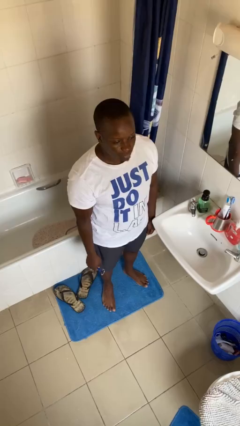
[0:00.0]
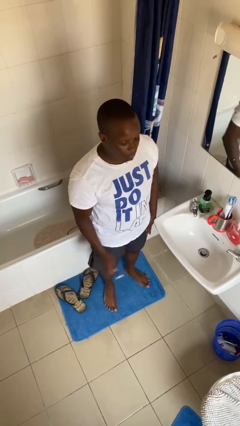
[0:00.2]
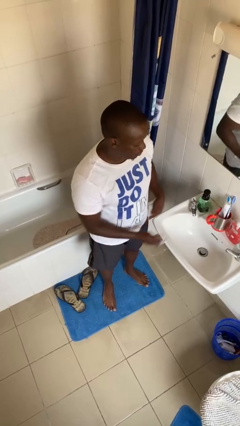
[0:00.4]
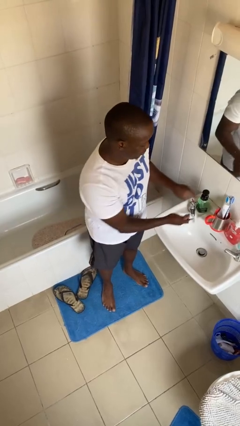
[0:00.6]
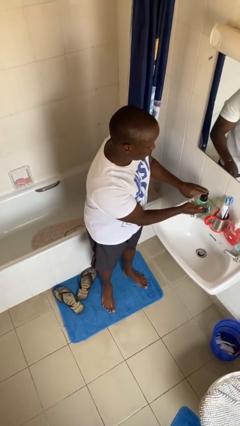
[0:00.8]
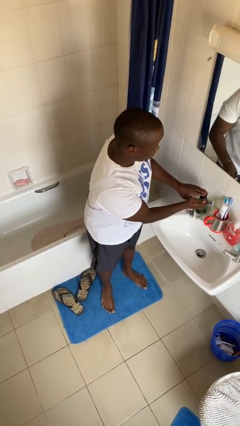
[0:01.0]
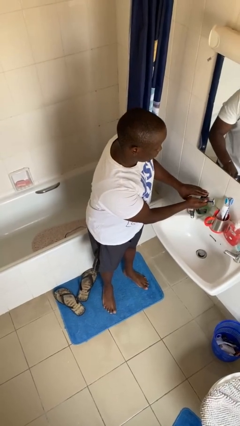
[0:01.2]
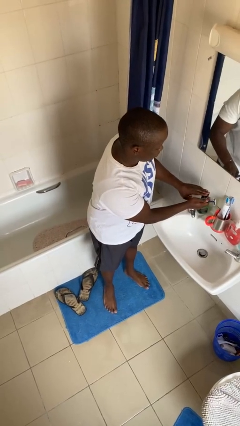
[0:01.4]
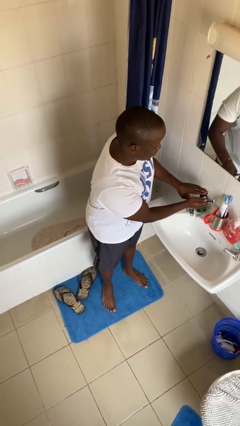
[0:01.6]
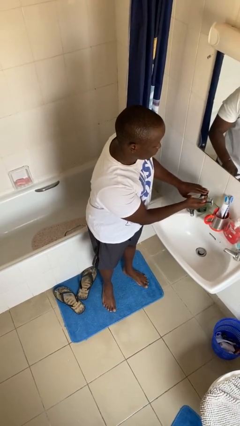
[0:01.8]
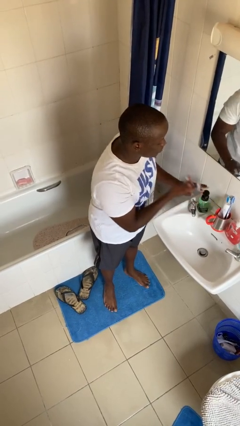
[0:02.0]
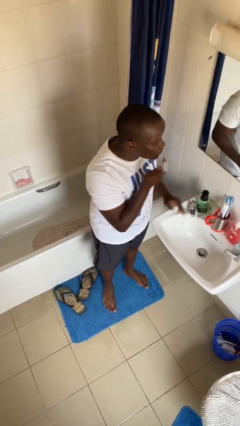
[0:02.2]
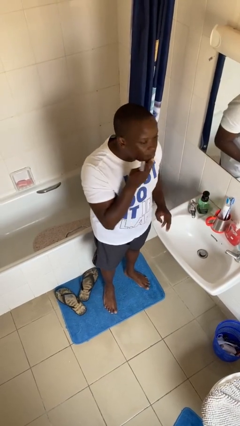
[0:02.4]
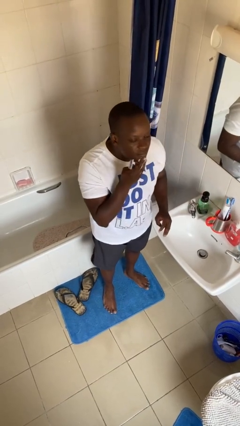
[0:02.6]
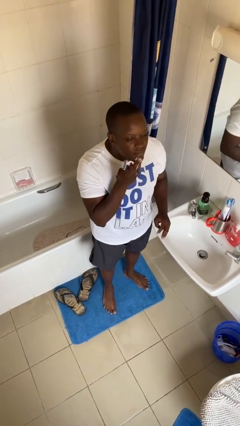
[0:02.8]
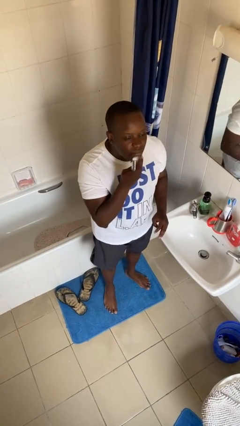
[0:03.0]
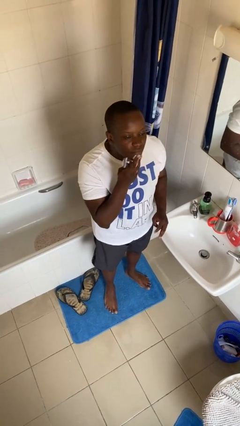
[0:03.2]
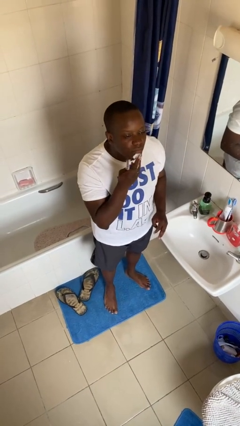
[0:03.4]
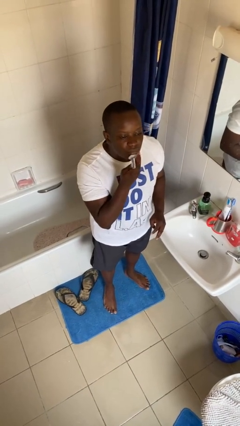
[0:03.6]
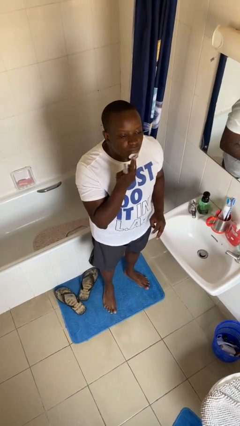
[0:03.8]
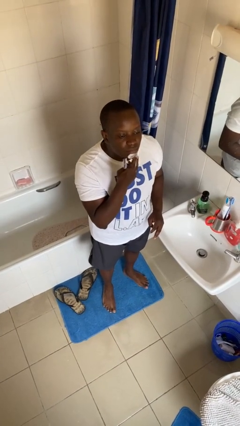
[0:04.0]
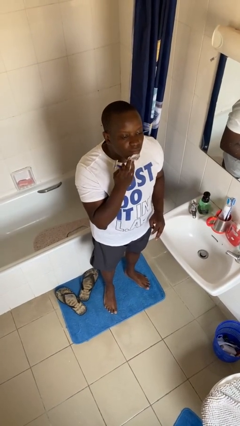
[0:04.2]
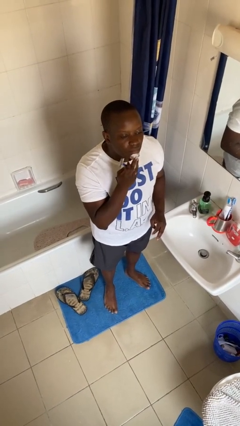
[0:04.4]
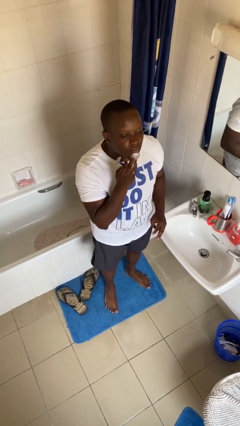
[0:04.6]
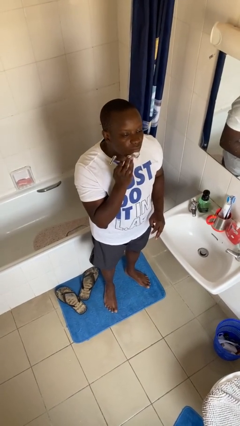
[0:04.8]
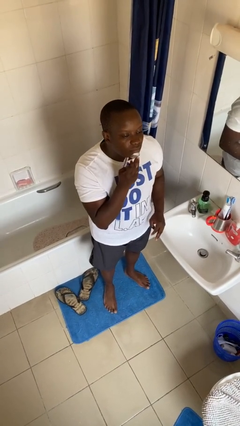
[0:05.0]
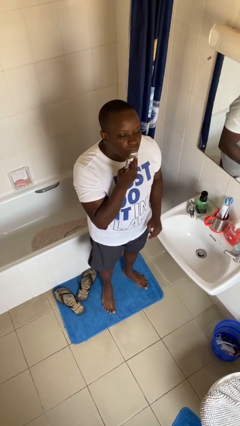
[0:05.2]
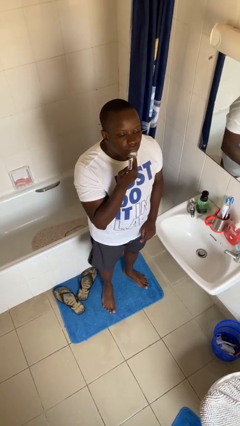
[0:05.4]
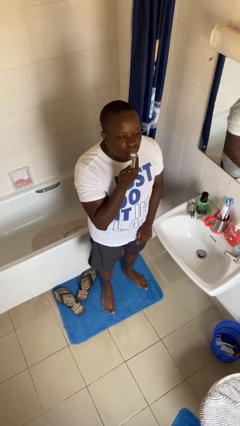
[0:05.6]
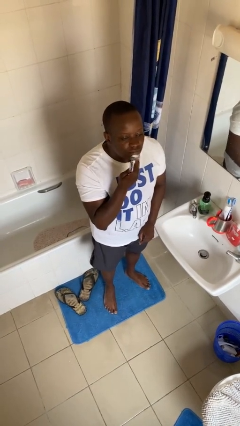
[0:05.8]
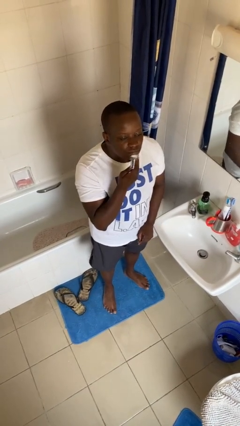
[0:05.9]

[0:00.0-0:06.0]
person applies shaving cream

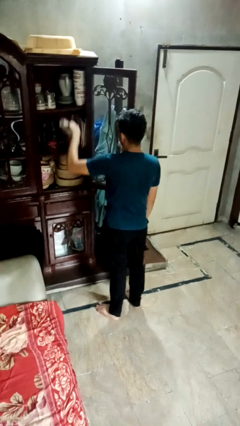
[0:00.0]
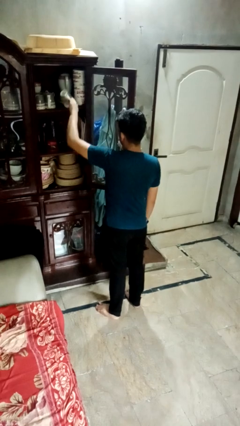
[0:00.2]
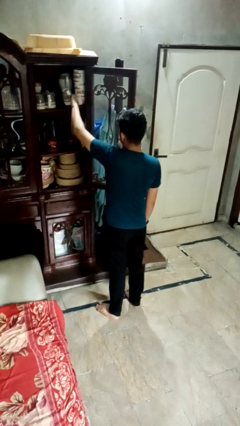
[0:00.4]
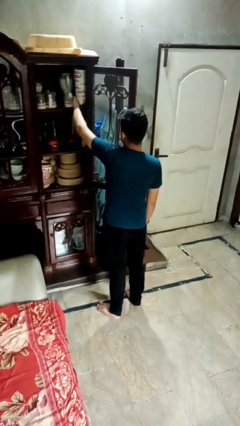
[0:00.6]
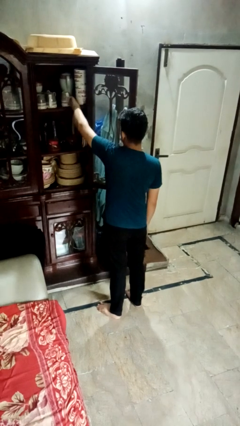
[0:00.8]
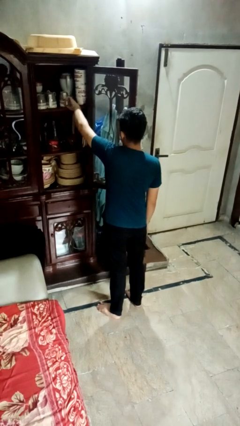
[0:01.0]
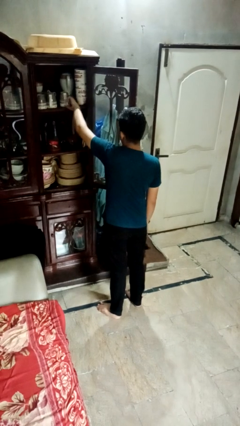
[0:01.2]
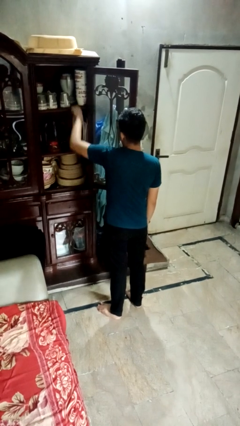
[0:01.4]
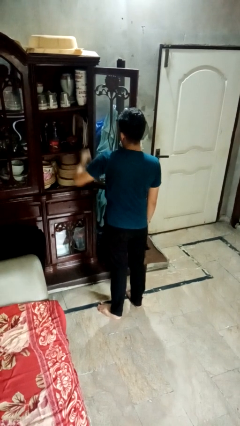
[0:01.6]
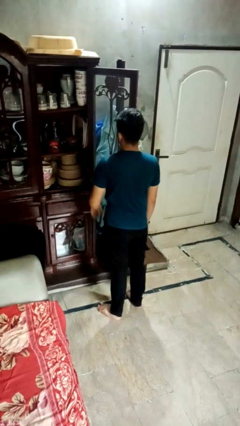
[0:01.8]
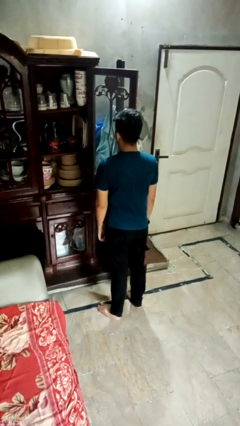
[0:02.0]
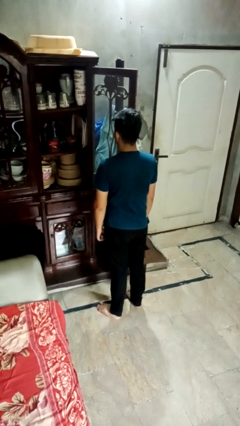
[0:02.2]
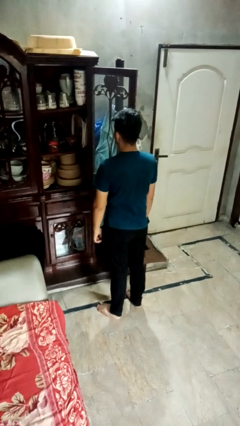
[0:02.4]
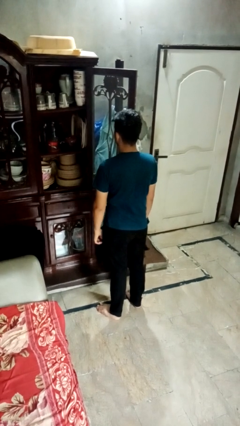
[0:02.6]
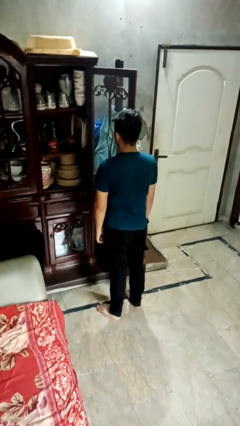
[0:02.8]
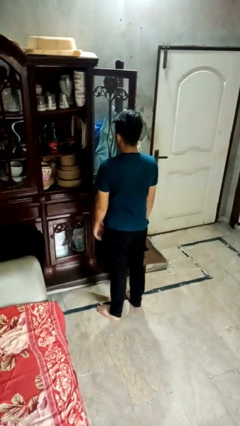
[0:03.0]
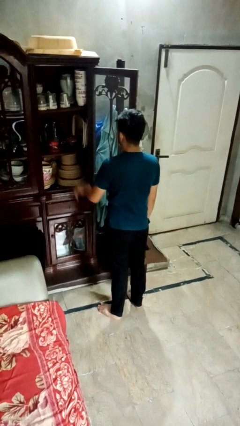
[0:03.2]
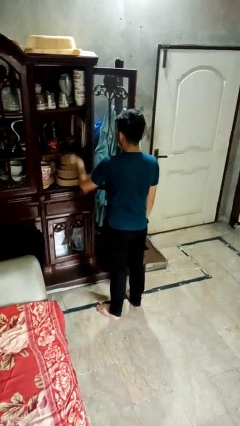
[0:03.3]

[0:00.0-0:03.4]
person puts object in cabinet

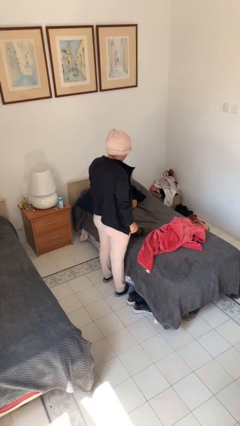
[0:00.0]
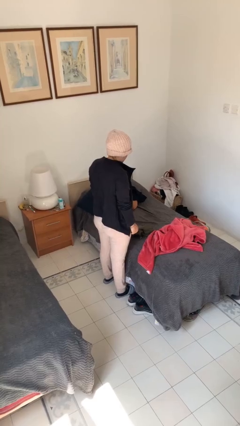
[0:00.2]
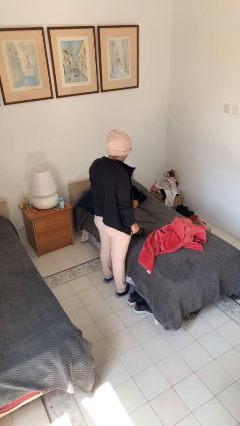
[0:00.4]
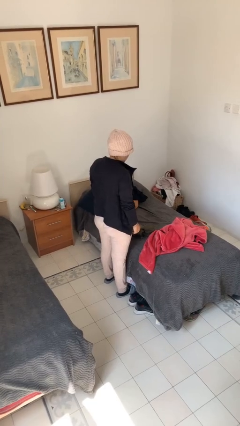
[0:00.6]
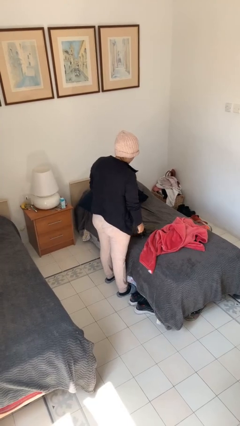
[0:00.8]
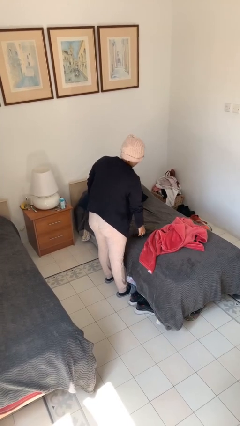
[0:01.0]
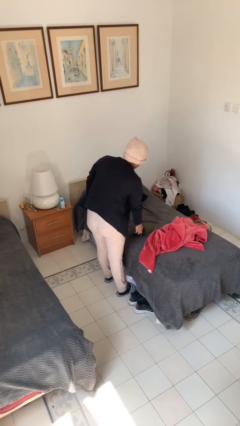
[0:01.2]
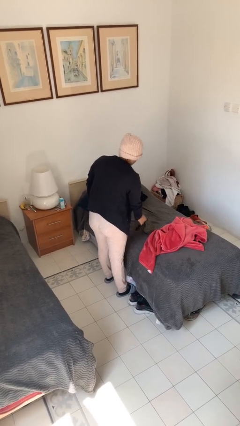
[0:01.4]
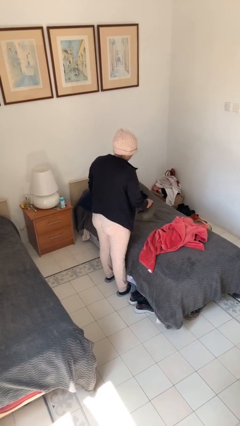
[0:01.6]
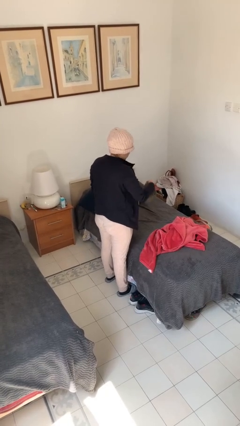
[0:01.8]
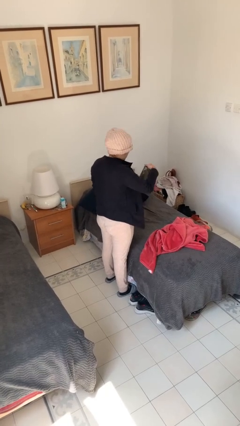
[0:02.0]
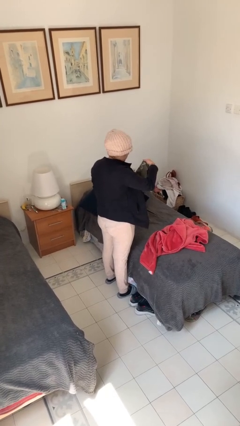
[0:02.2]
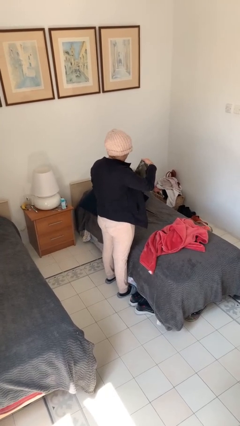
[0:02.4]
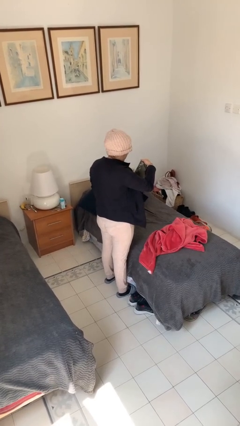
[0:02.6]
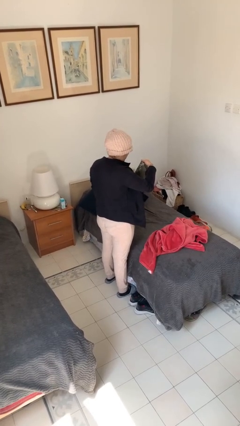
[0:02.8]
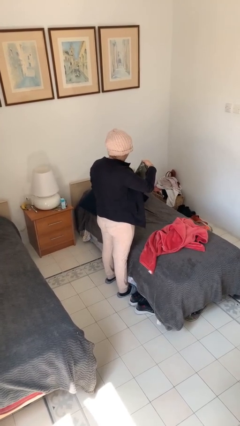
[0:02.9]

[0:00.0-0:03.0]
person picks up object from couch

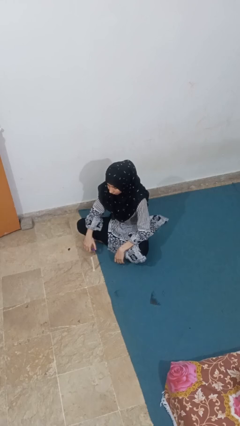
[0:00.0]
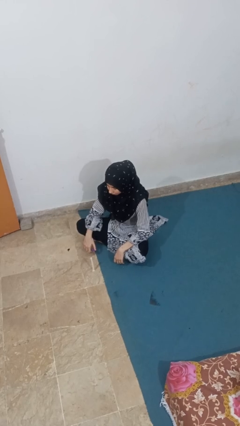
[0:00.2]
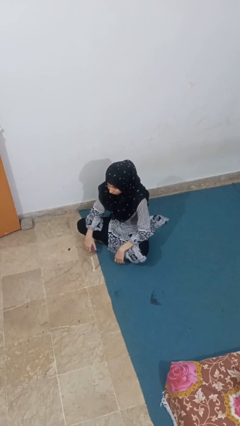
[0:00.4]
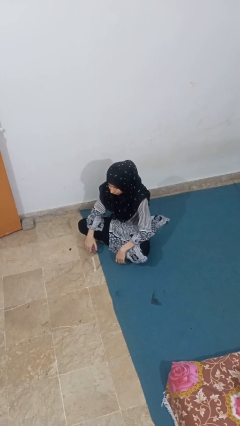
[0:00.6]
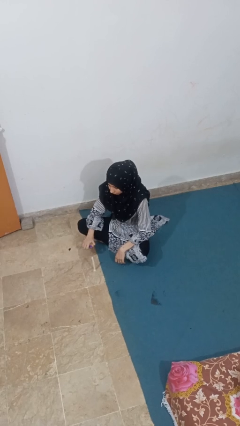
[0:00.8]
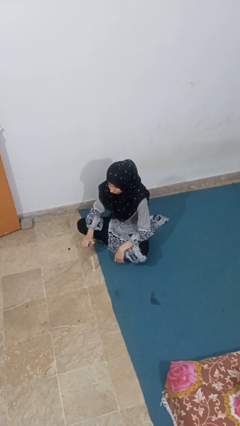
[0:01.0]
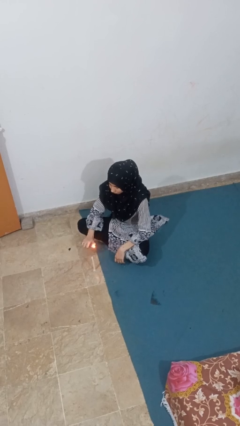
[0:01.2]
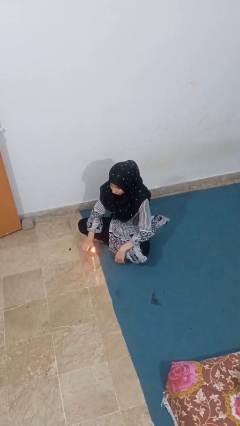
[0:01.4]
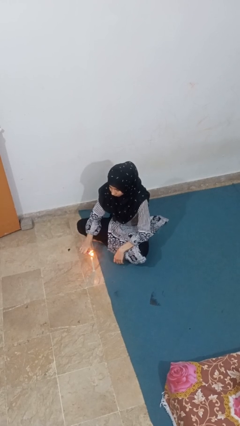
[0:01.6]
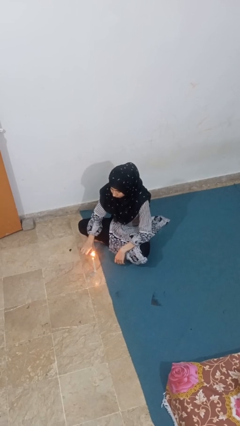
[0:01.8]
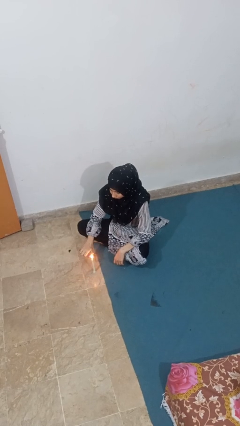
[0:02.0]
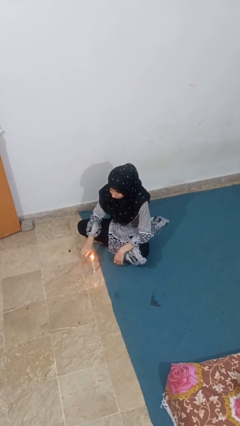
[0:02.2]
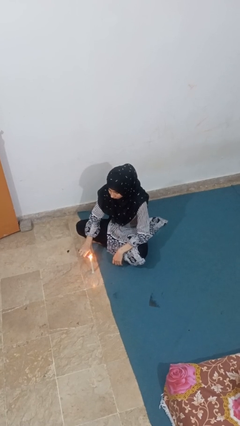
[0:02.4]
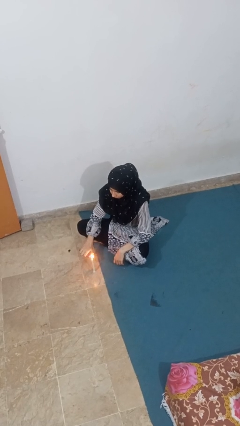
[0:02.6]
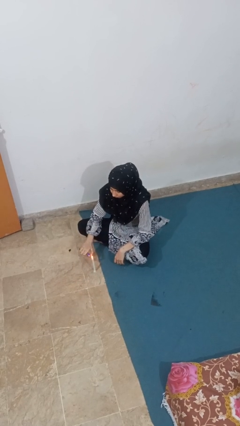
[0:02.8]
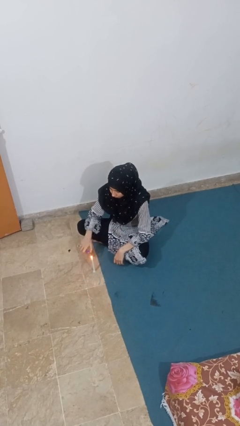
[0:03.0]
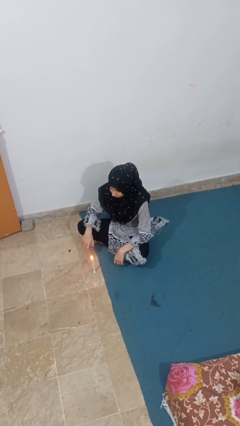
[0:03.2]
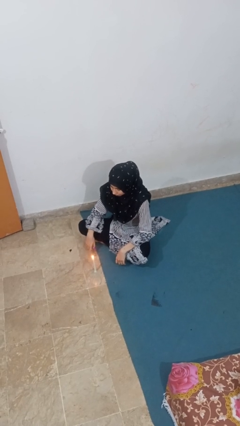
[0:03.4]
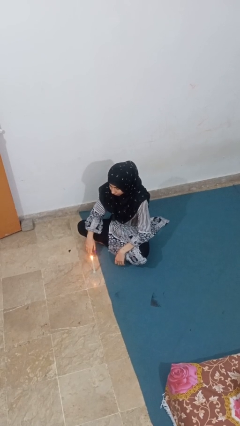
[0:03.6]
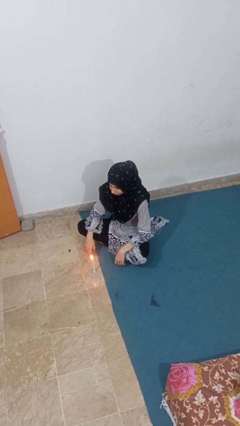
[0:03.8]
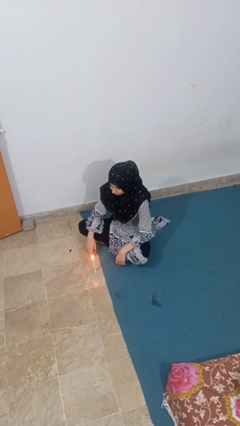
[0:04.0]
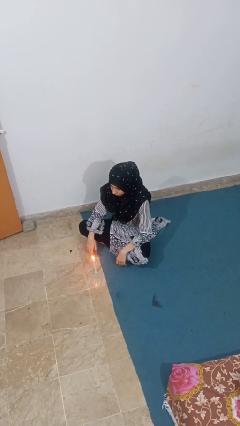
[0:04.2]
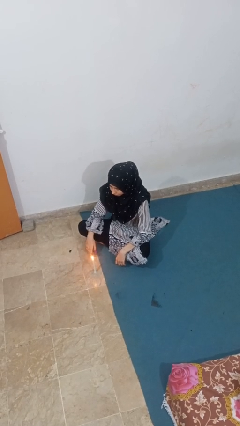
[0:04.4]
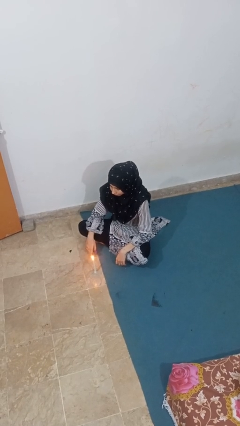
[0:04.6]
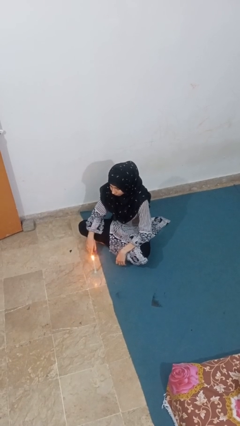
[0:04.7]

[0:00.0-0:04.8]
person lights candle

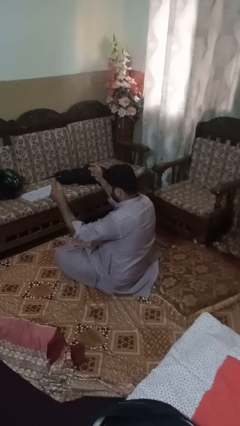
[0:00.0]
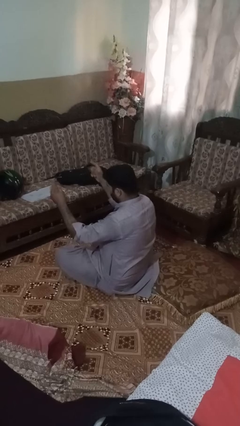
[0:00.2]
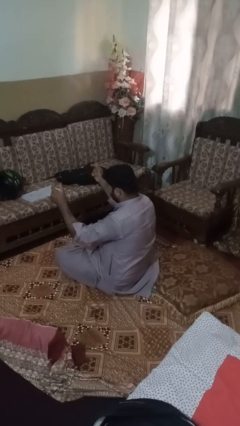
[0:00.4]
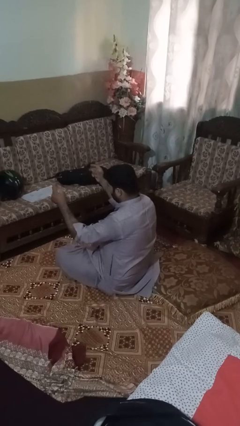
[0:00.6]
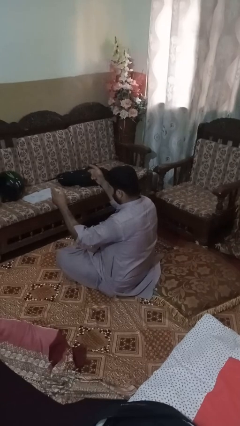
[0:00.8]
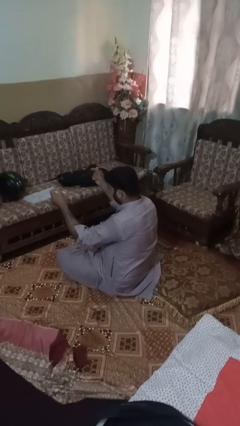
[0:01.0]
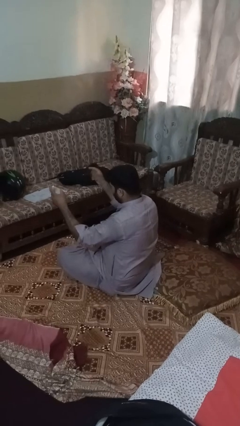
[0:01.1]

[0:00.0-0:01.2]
person snaps fingers
